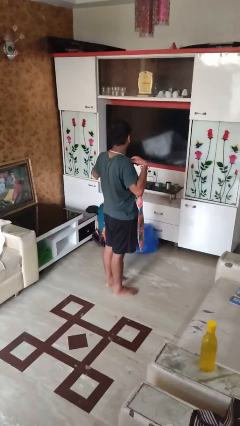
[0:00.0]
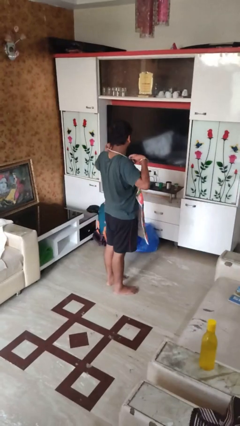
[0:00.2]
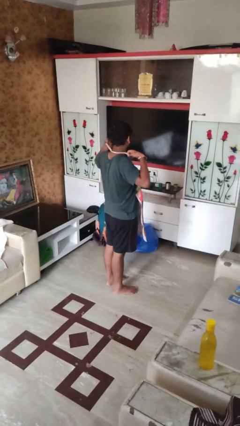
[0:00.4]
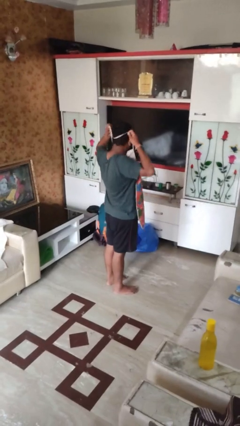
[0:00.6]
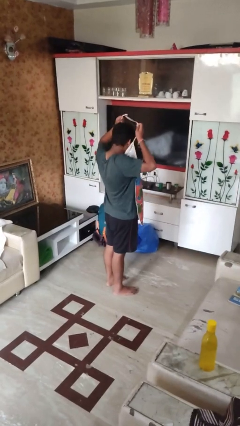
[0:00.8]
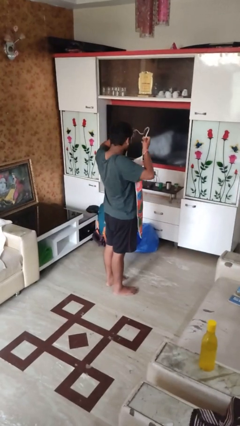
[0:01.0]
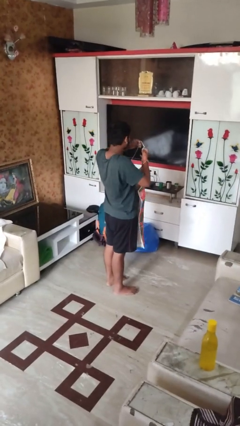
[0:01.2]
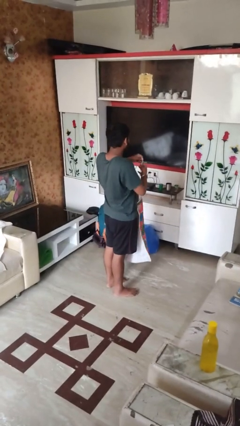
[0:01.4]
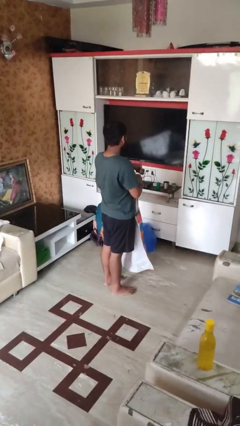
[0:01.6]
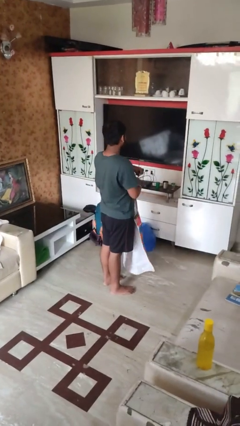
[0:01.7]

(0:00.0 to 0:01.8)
person takes off apron

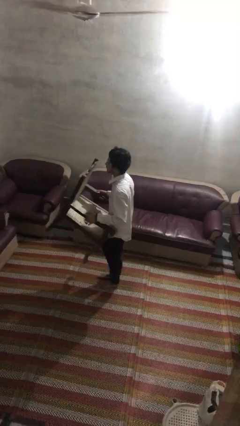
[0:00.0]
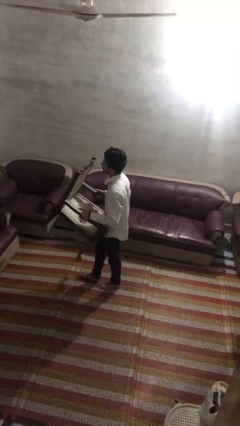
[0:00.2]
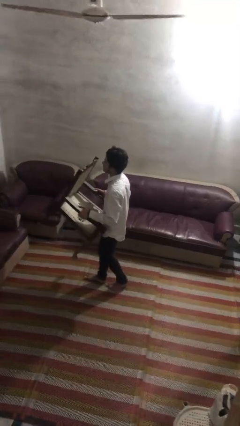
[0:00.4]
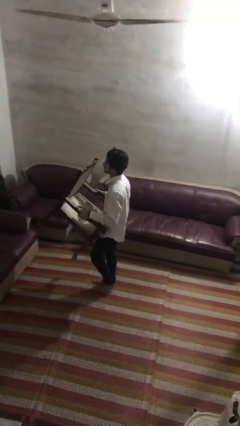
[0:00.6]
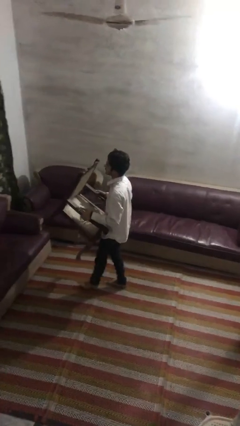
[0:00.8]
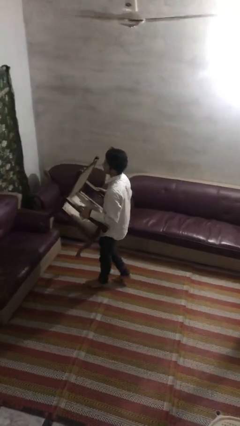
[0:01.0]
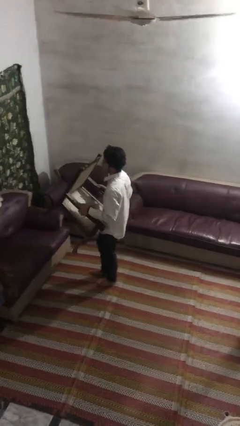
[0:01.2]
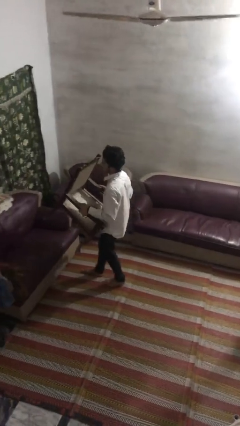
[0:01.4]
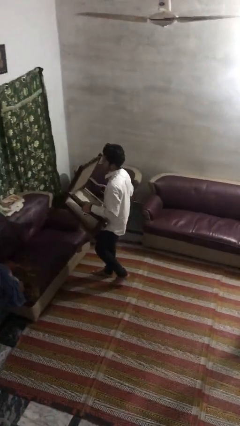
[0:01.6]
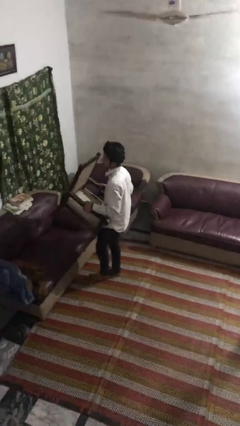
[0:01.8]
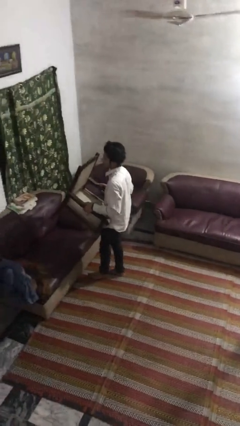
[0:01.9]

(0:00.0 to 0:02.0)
person carries furniture

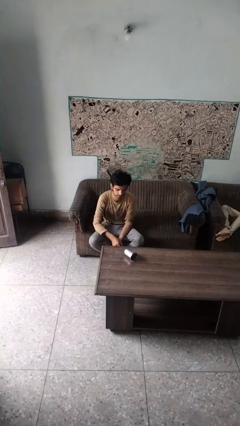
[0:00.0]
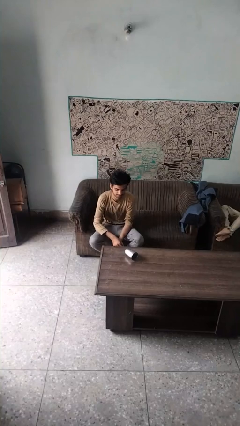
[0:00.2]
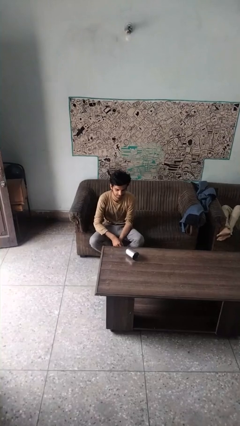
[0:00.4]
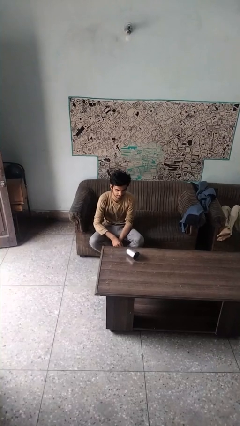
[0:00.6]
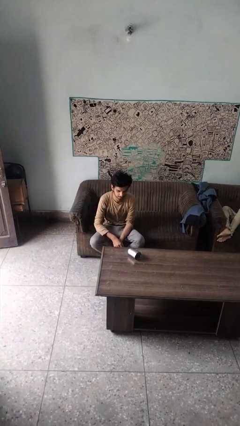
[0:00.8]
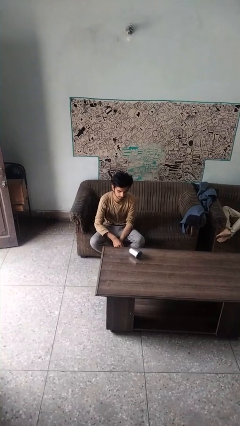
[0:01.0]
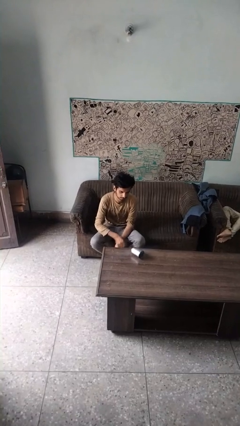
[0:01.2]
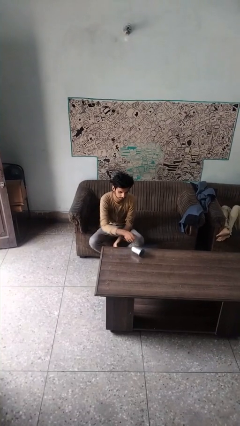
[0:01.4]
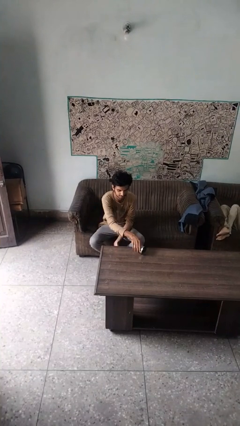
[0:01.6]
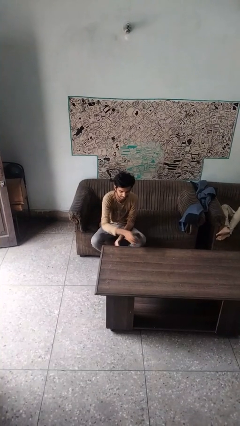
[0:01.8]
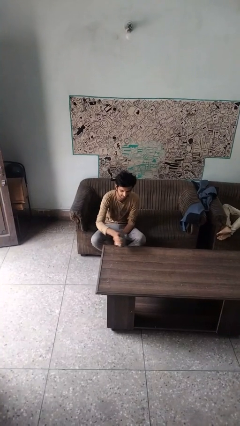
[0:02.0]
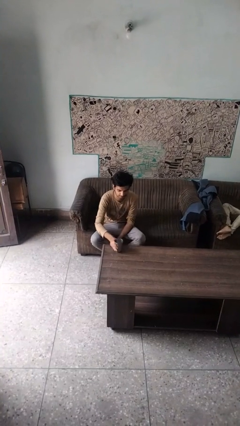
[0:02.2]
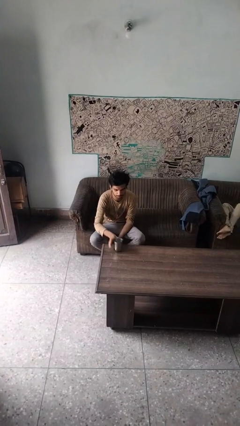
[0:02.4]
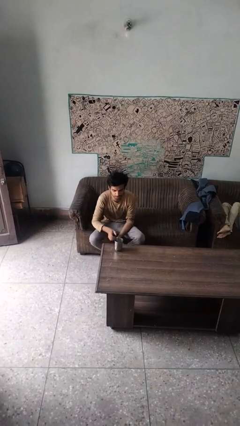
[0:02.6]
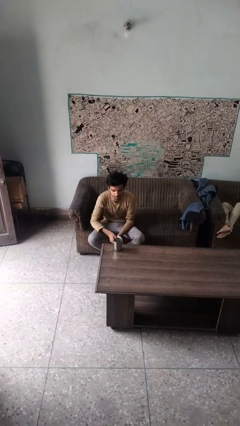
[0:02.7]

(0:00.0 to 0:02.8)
person sets upright glass

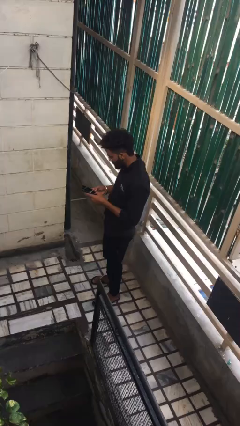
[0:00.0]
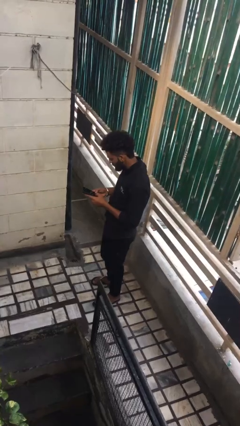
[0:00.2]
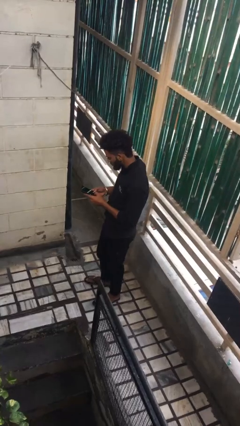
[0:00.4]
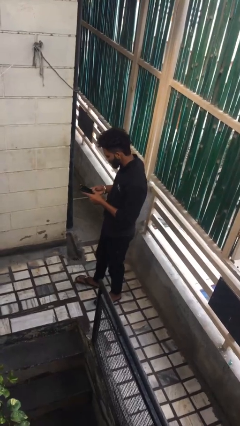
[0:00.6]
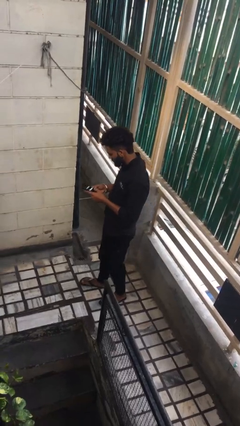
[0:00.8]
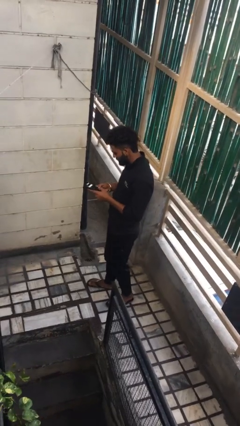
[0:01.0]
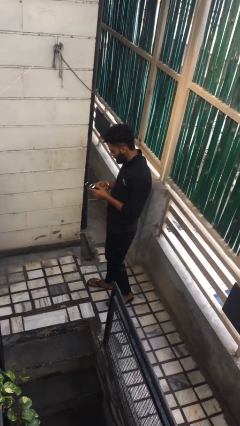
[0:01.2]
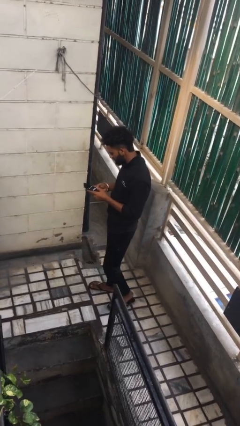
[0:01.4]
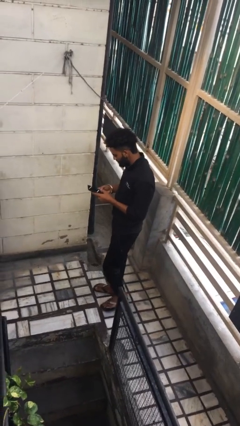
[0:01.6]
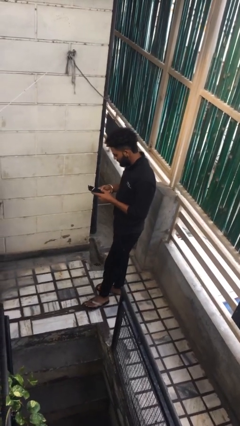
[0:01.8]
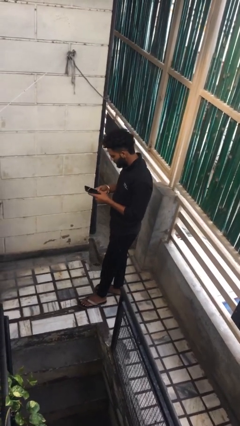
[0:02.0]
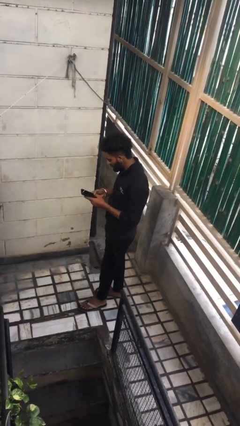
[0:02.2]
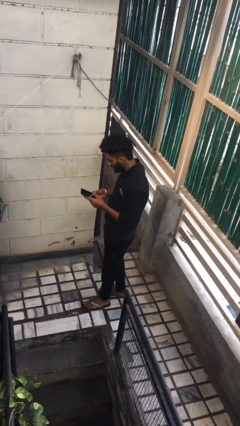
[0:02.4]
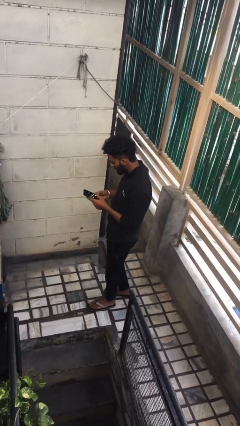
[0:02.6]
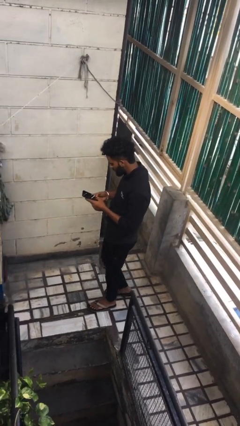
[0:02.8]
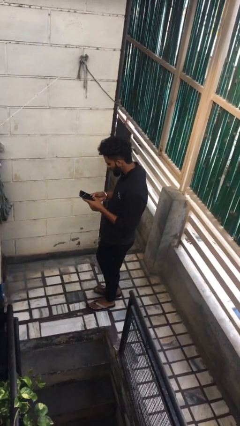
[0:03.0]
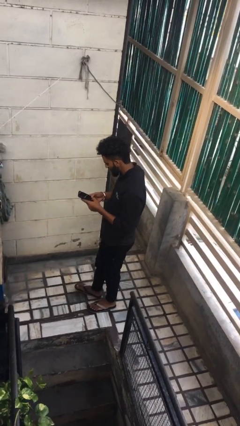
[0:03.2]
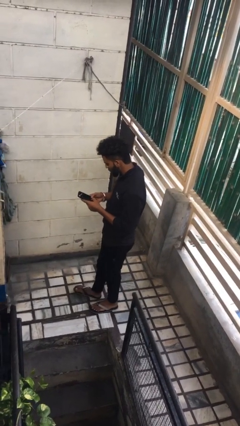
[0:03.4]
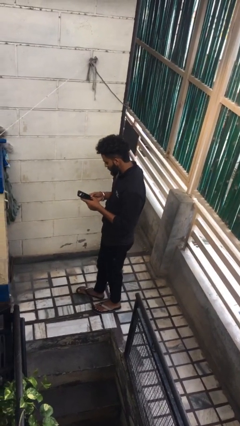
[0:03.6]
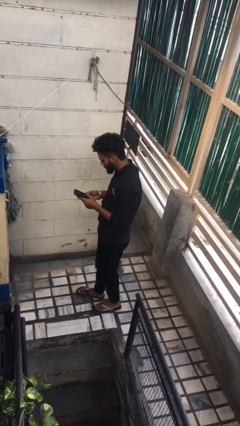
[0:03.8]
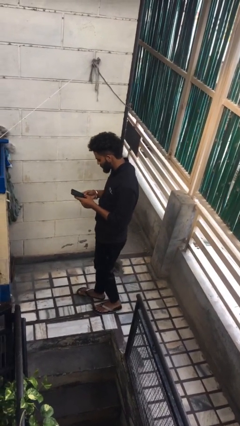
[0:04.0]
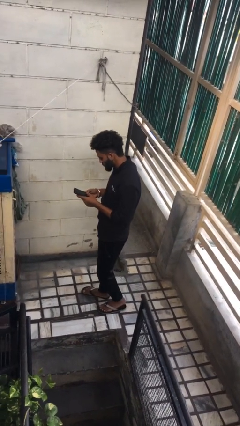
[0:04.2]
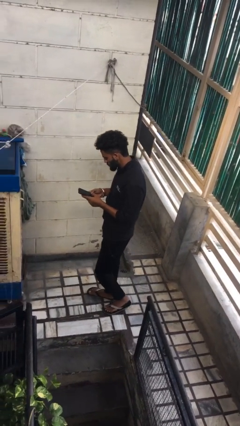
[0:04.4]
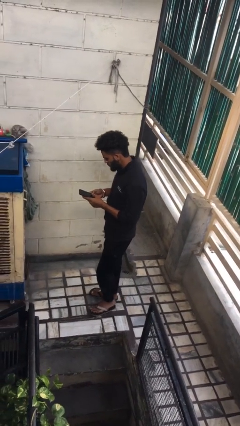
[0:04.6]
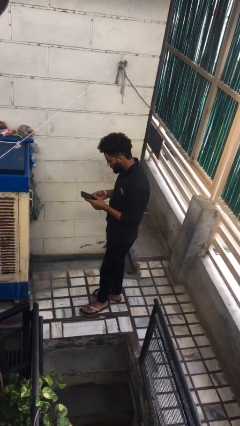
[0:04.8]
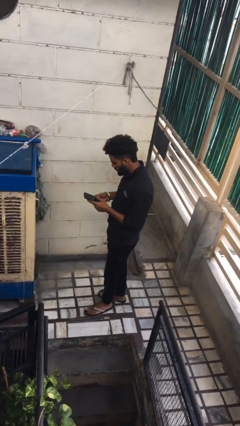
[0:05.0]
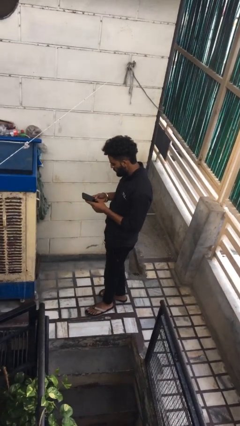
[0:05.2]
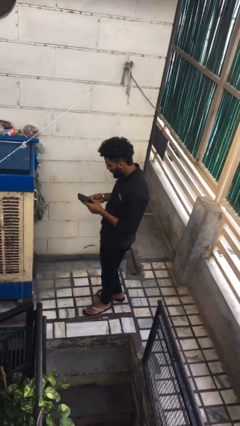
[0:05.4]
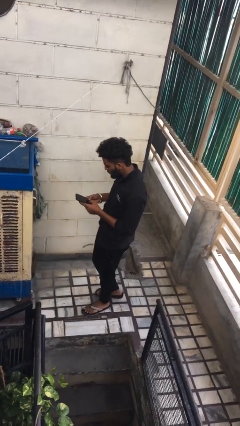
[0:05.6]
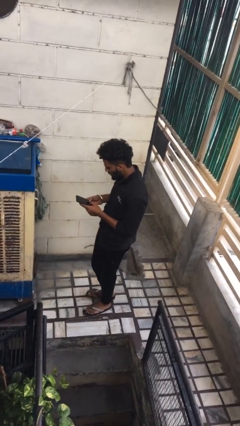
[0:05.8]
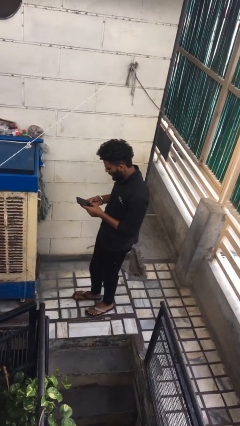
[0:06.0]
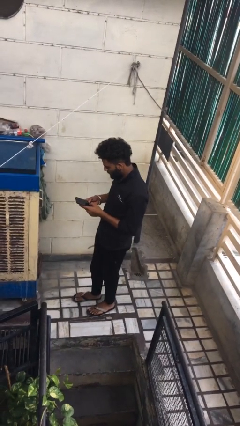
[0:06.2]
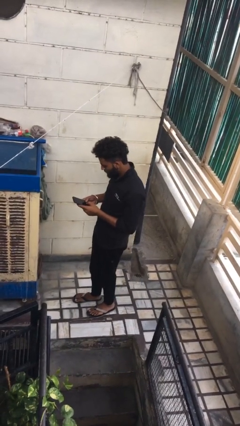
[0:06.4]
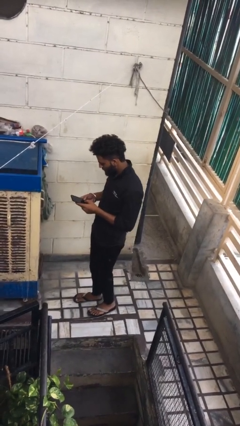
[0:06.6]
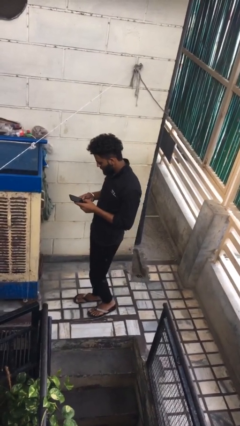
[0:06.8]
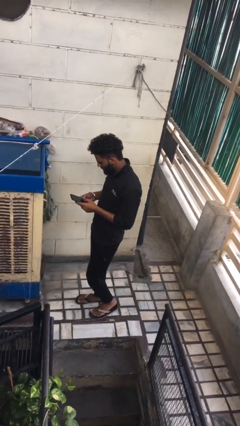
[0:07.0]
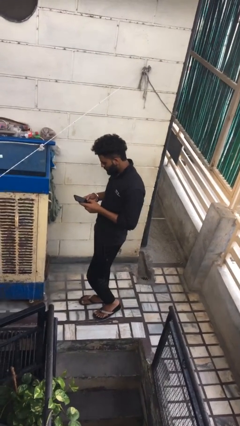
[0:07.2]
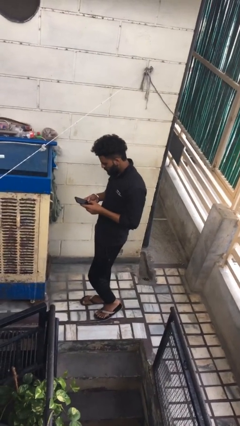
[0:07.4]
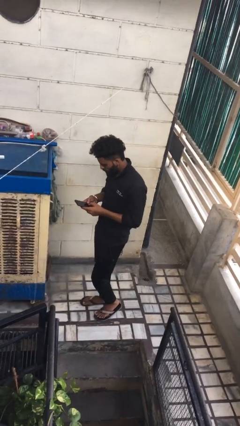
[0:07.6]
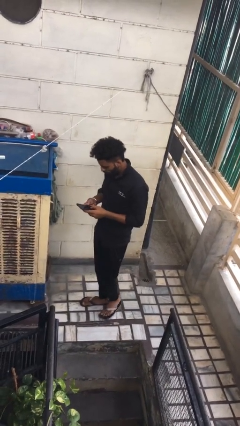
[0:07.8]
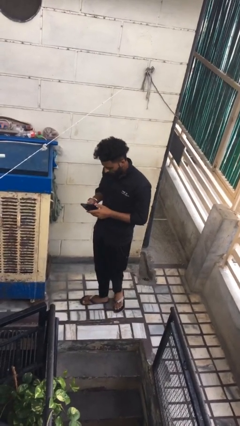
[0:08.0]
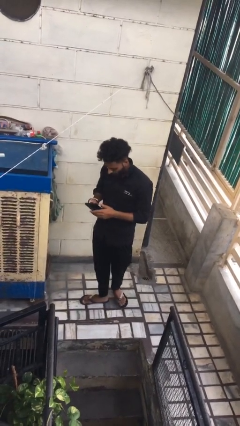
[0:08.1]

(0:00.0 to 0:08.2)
person texts on phone

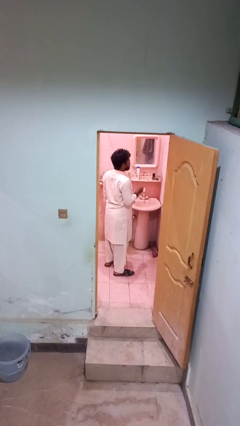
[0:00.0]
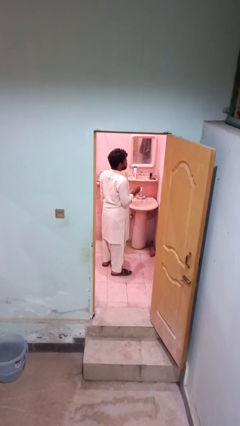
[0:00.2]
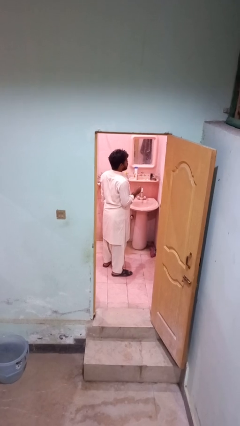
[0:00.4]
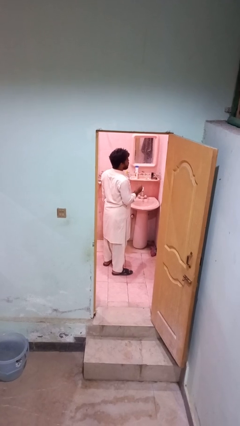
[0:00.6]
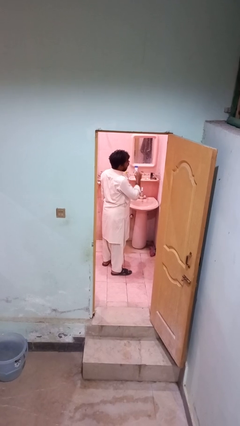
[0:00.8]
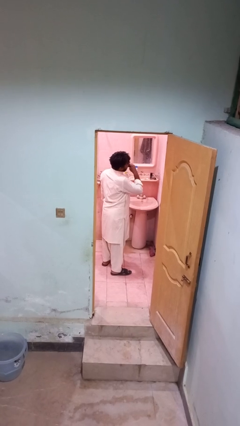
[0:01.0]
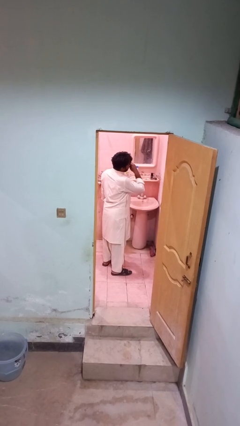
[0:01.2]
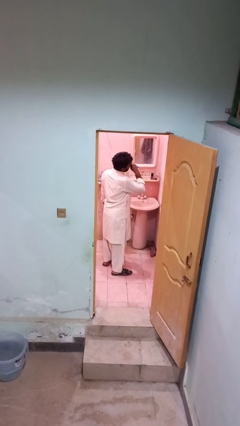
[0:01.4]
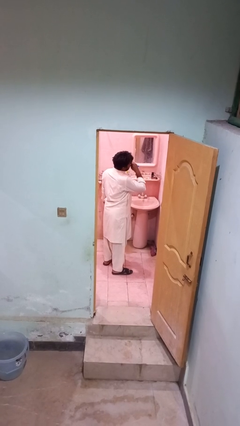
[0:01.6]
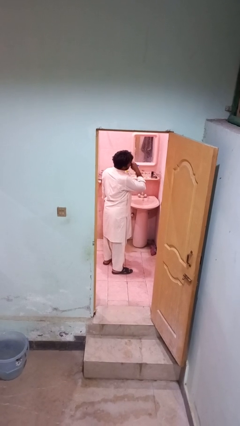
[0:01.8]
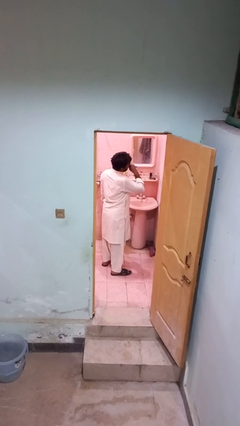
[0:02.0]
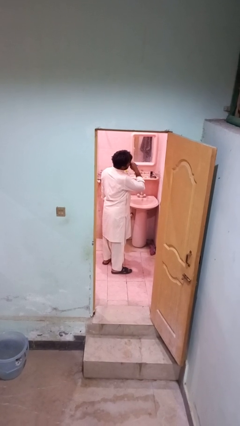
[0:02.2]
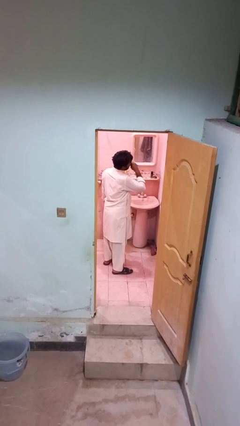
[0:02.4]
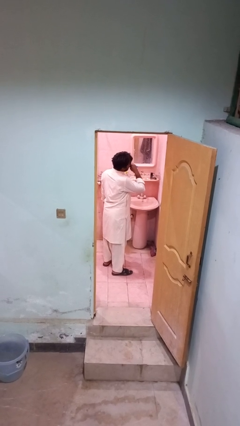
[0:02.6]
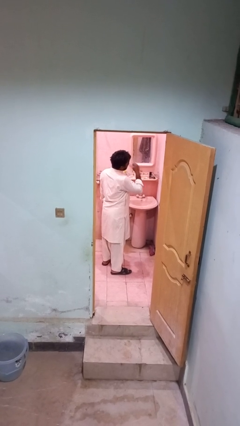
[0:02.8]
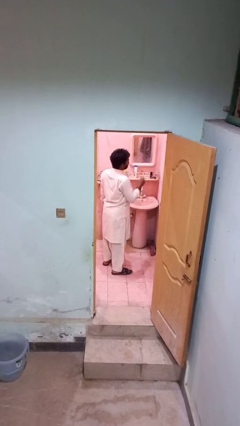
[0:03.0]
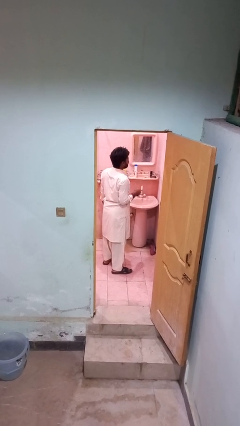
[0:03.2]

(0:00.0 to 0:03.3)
person flosses
